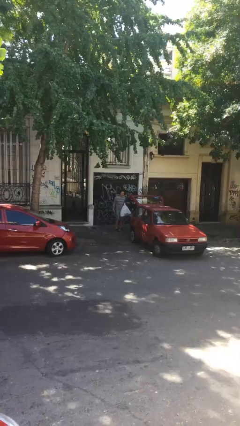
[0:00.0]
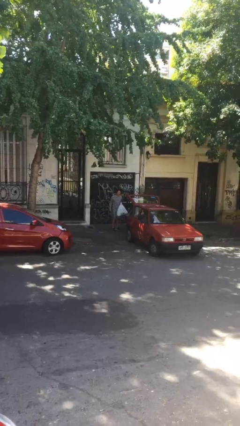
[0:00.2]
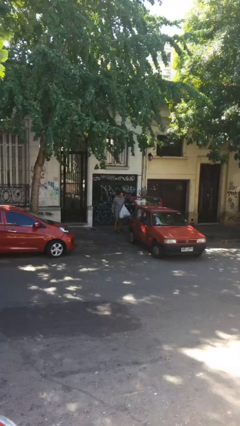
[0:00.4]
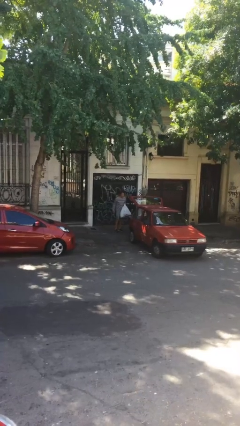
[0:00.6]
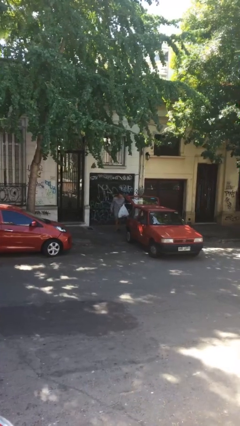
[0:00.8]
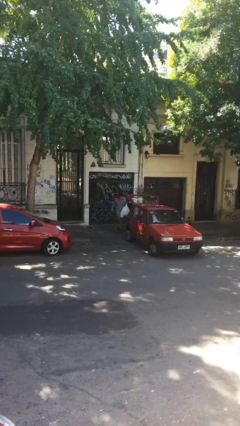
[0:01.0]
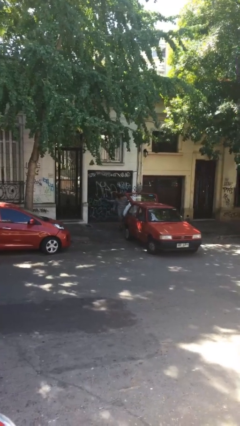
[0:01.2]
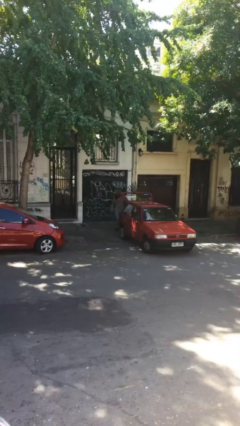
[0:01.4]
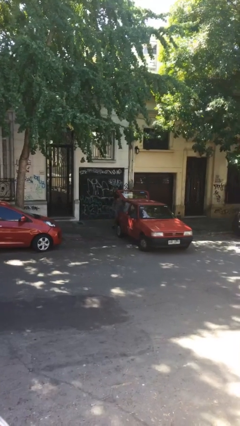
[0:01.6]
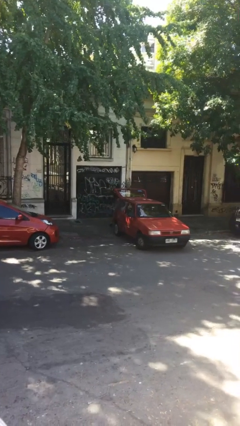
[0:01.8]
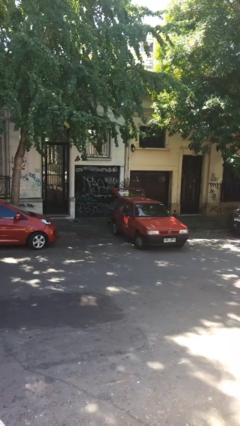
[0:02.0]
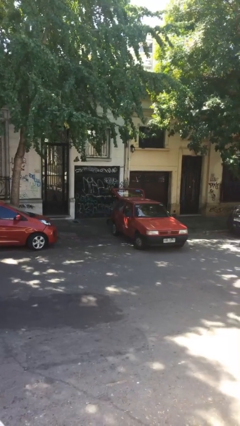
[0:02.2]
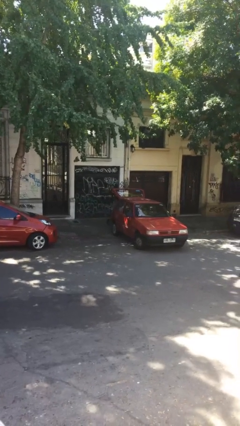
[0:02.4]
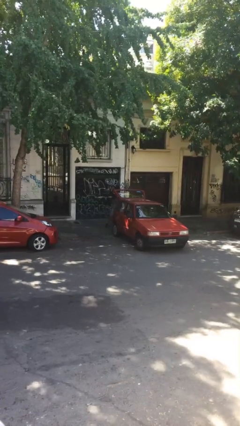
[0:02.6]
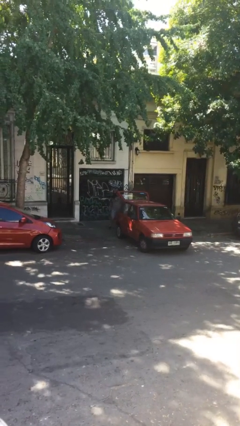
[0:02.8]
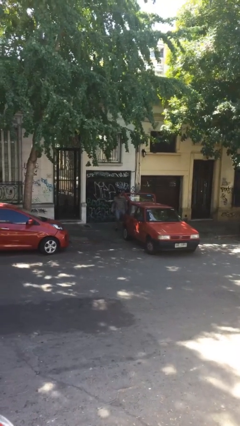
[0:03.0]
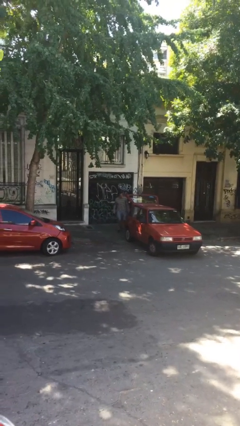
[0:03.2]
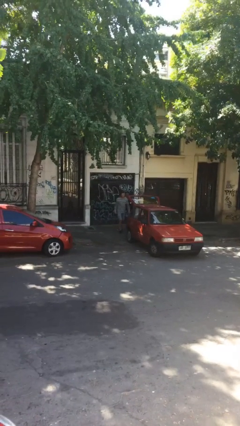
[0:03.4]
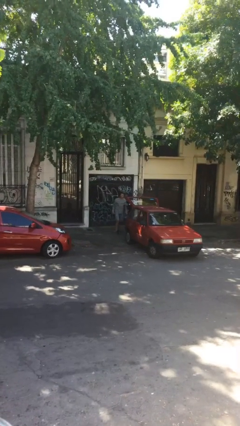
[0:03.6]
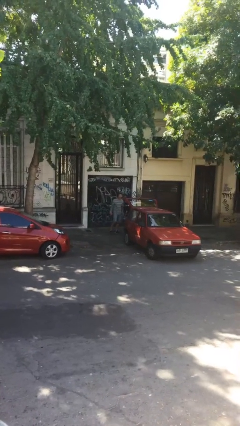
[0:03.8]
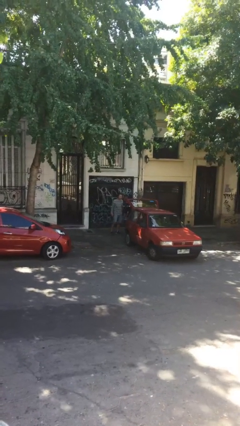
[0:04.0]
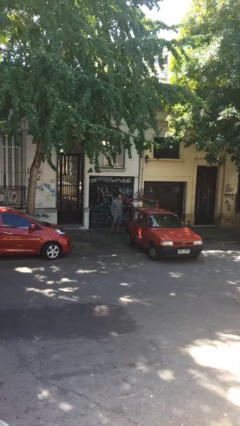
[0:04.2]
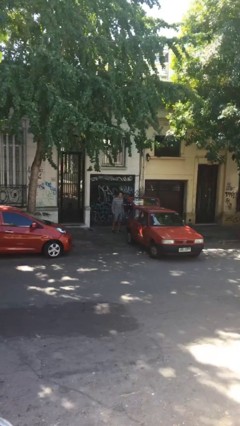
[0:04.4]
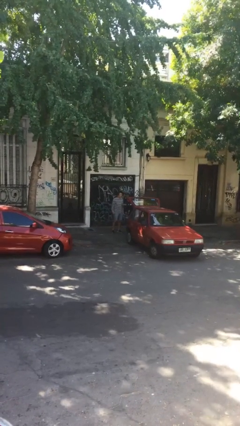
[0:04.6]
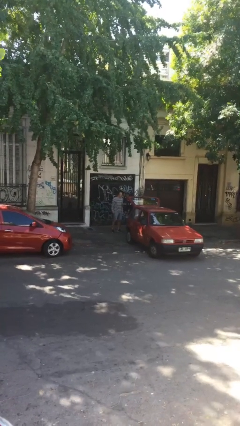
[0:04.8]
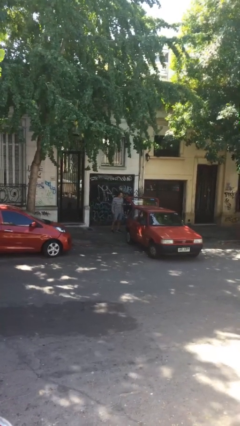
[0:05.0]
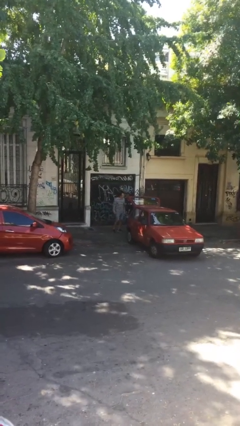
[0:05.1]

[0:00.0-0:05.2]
person loads car

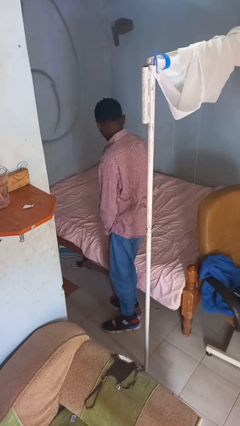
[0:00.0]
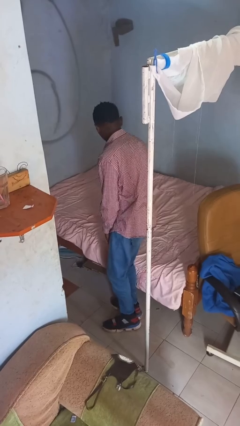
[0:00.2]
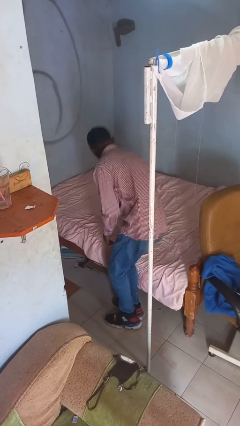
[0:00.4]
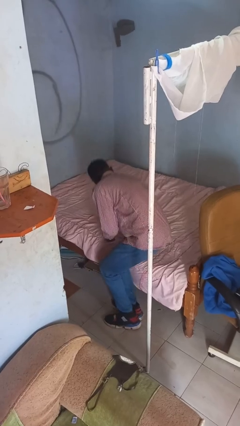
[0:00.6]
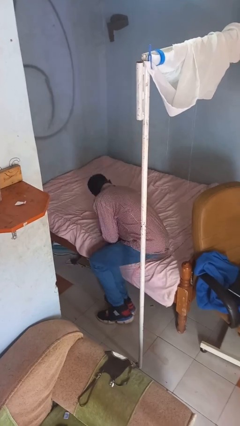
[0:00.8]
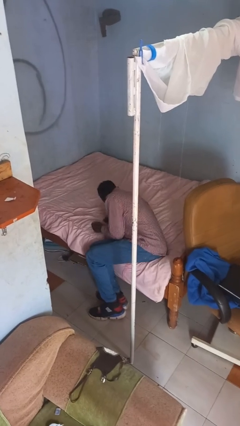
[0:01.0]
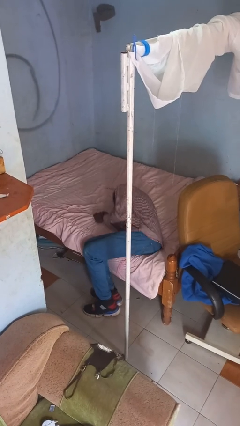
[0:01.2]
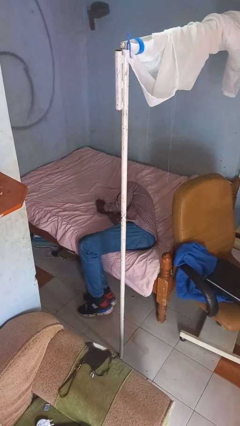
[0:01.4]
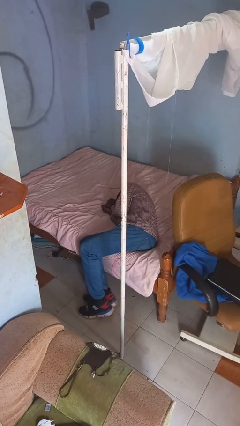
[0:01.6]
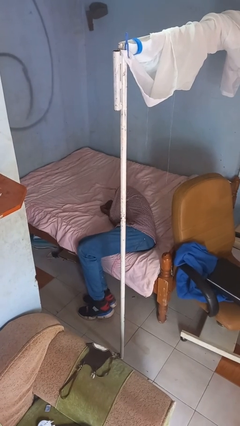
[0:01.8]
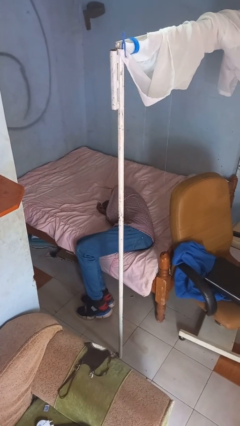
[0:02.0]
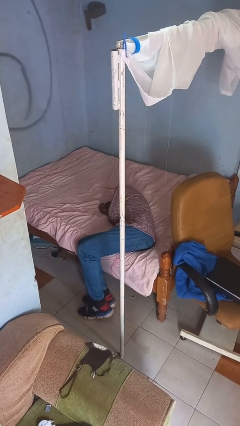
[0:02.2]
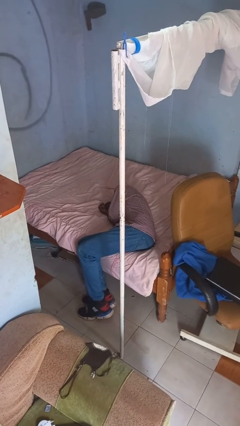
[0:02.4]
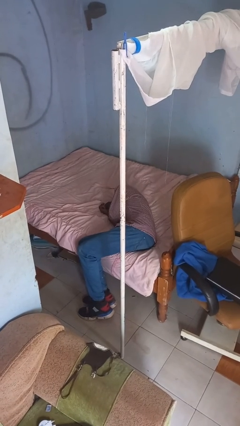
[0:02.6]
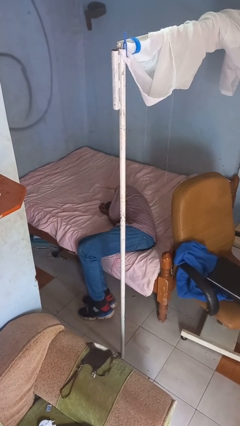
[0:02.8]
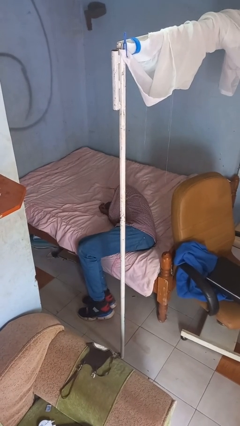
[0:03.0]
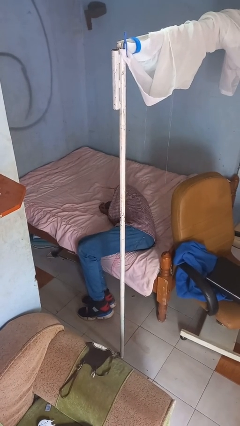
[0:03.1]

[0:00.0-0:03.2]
person lies down on bed

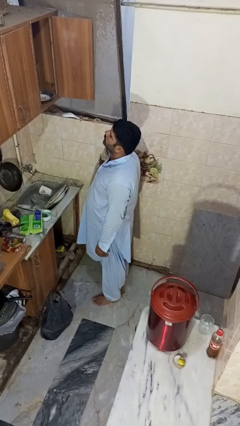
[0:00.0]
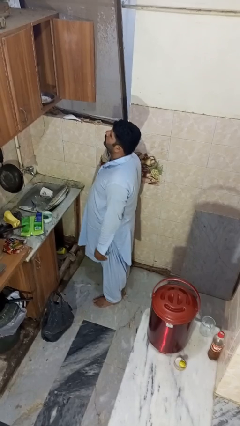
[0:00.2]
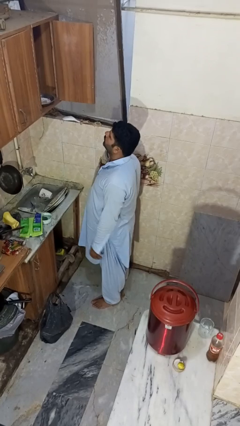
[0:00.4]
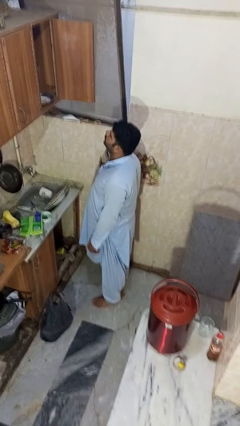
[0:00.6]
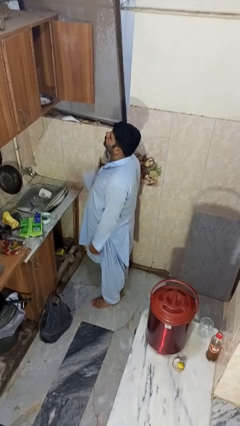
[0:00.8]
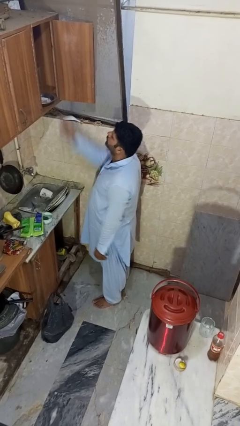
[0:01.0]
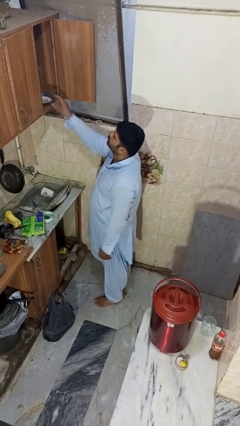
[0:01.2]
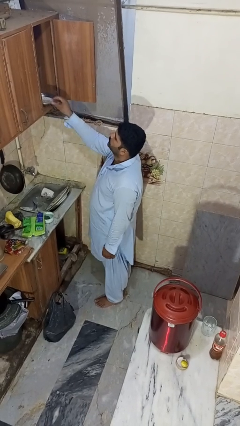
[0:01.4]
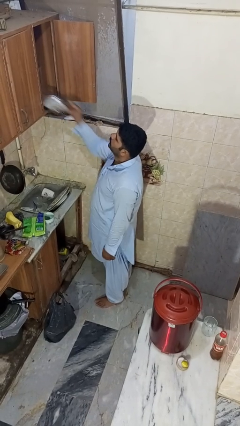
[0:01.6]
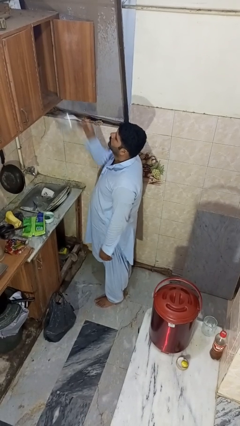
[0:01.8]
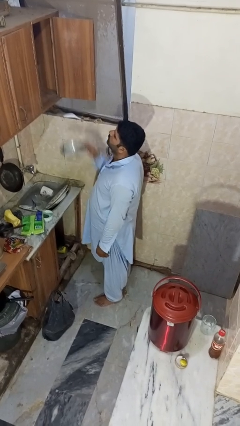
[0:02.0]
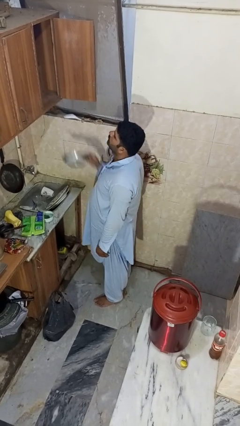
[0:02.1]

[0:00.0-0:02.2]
person takes object from cabinet

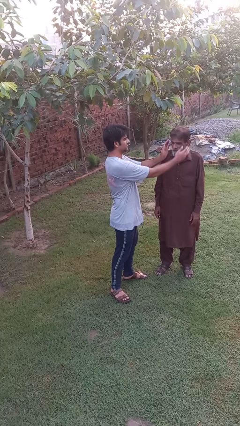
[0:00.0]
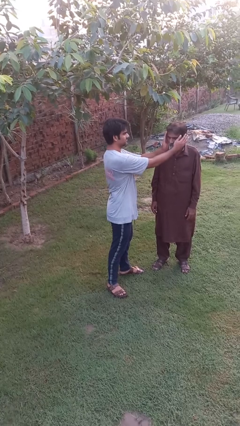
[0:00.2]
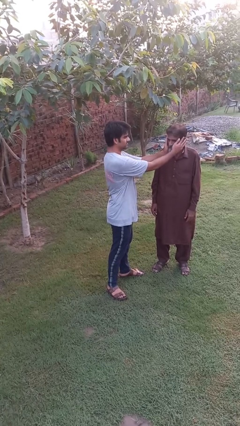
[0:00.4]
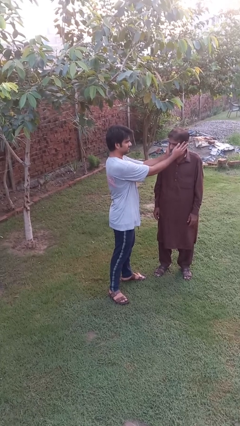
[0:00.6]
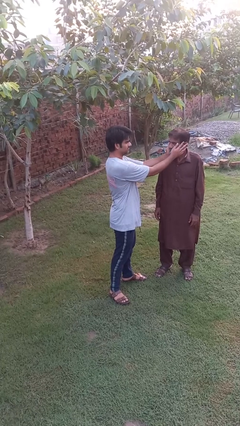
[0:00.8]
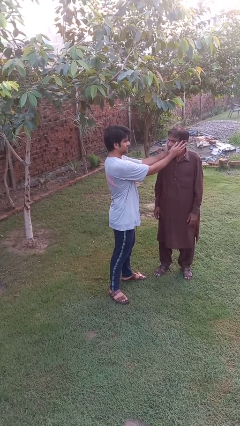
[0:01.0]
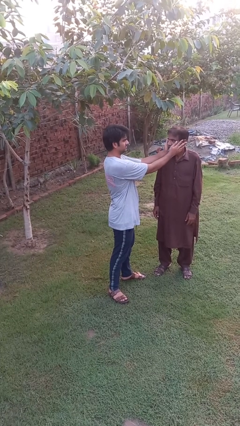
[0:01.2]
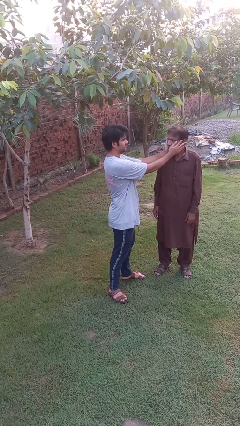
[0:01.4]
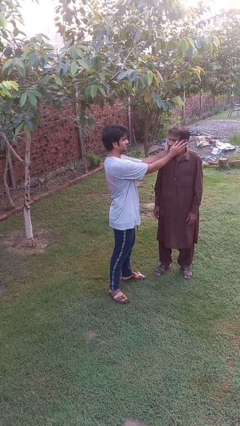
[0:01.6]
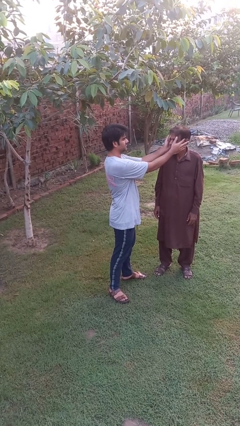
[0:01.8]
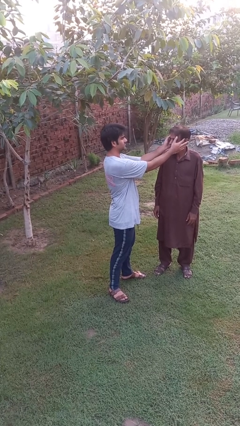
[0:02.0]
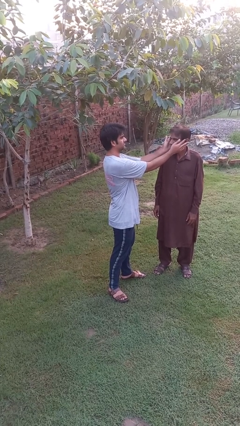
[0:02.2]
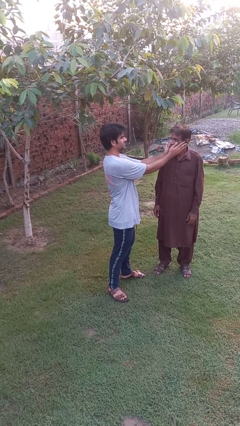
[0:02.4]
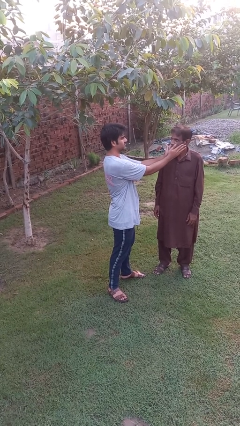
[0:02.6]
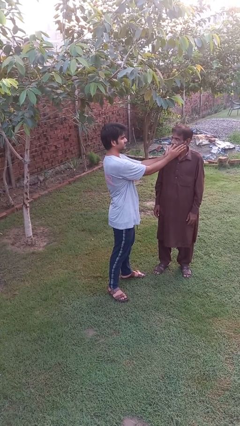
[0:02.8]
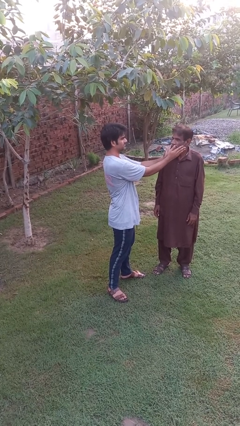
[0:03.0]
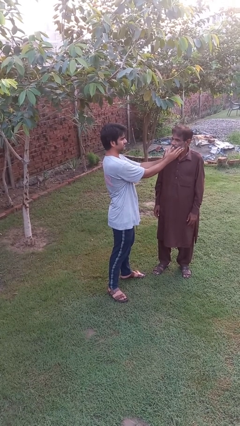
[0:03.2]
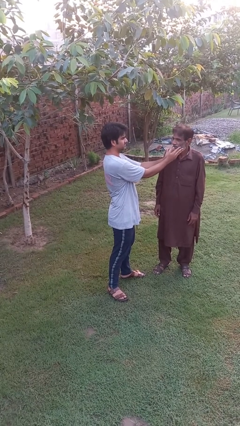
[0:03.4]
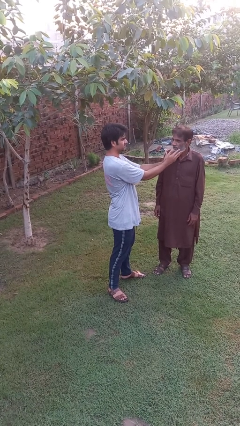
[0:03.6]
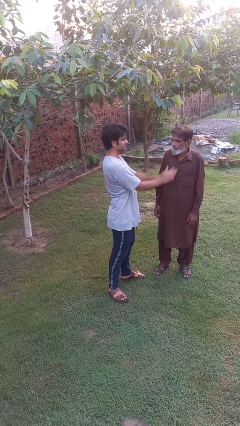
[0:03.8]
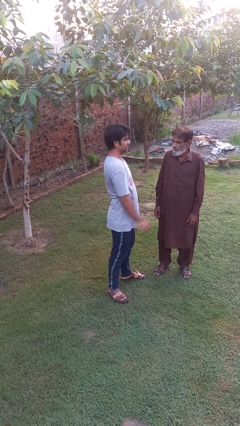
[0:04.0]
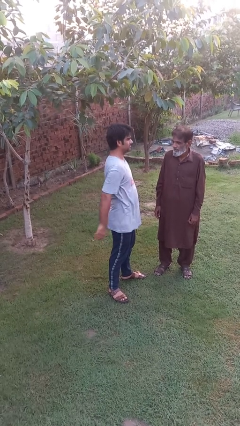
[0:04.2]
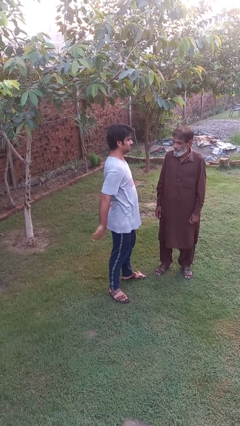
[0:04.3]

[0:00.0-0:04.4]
person touches face of person

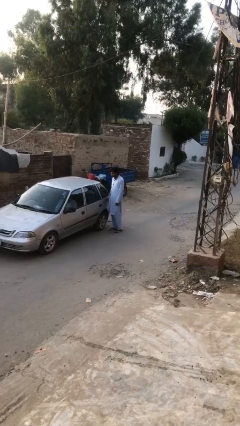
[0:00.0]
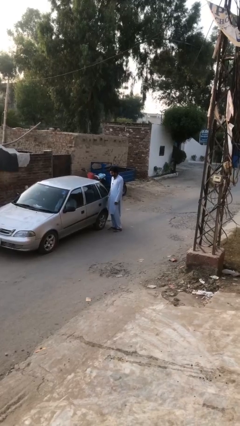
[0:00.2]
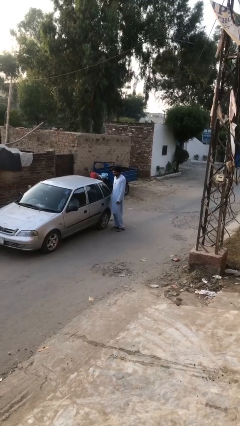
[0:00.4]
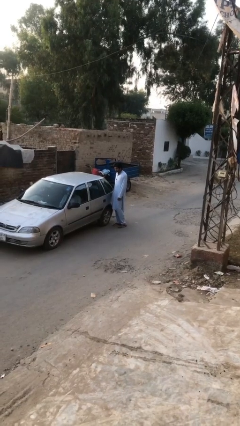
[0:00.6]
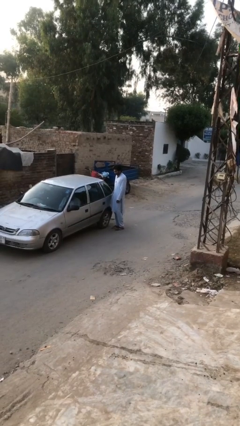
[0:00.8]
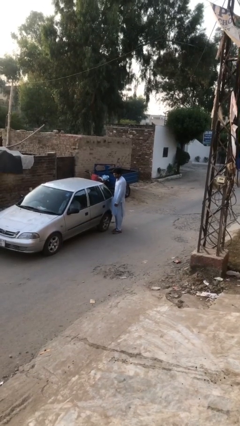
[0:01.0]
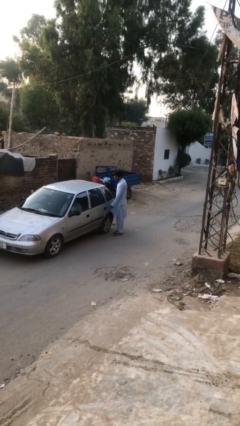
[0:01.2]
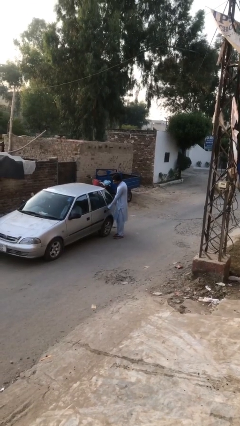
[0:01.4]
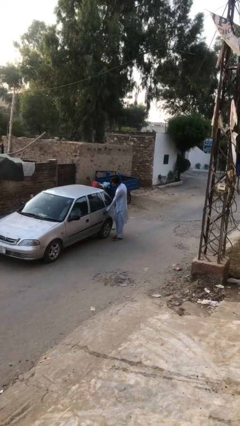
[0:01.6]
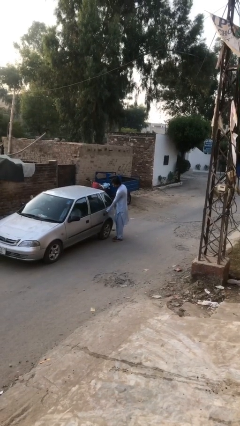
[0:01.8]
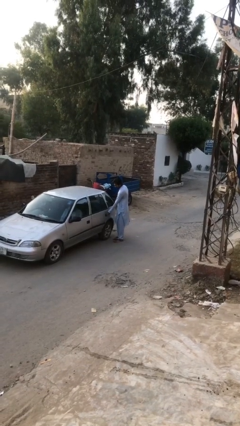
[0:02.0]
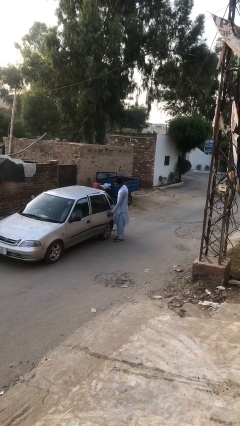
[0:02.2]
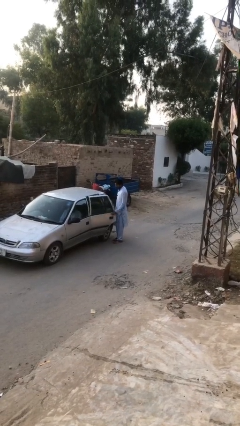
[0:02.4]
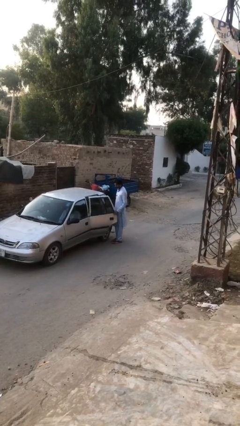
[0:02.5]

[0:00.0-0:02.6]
person opens car door

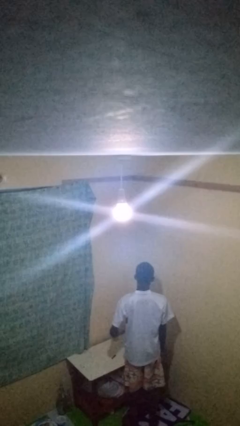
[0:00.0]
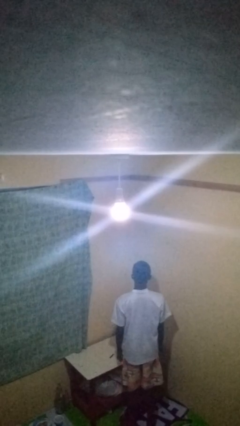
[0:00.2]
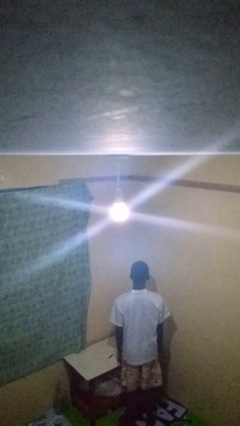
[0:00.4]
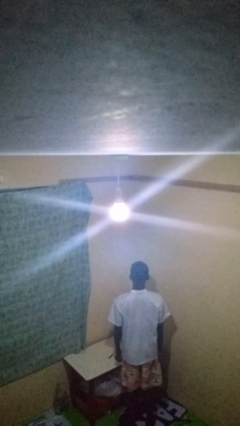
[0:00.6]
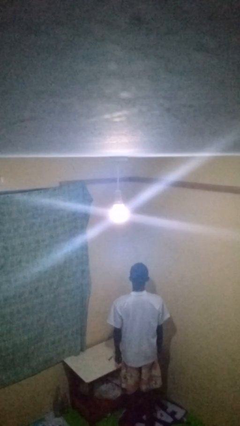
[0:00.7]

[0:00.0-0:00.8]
person gestures behind me
